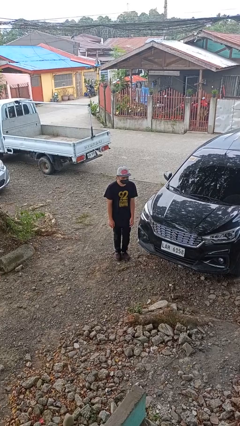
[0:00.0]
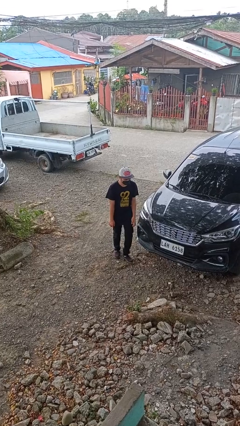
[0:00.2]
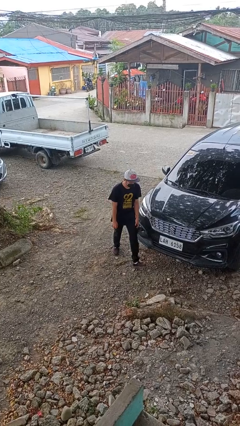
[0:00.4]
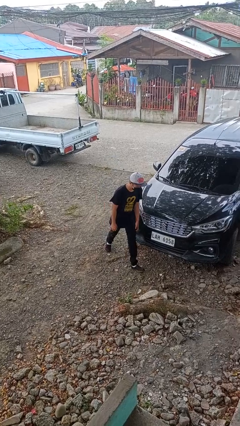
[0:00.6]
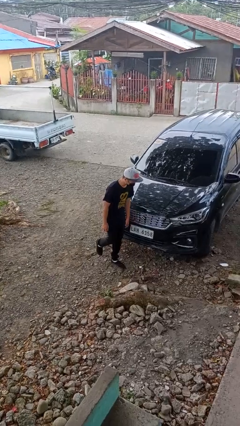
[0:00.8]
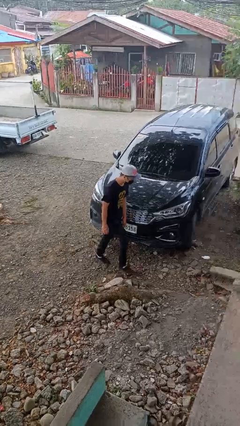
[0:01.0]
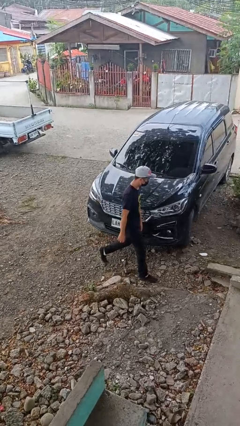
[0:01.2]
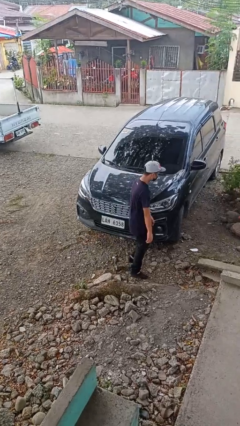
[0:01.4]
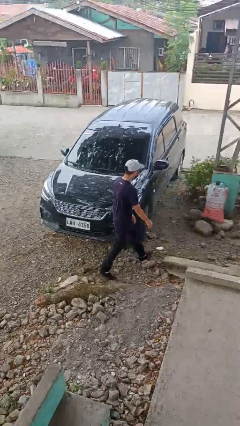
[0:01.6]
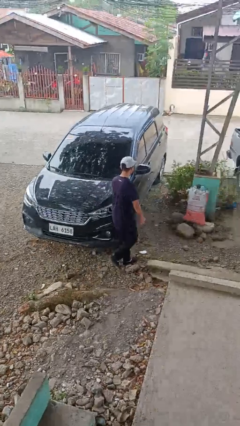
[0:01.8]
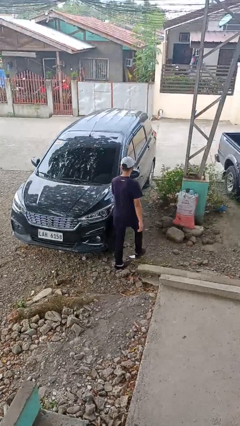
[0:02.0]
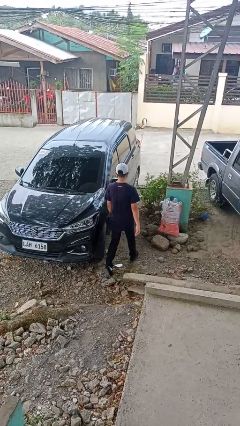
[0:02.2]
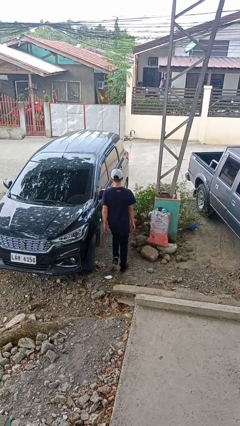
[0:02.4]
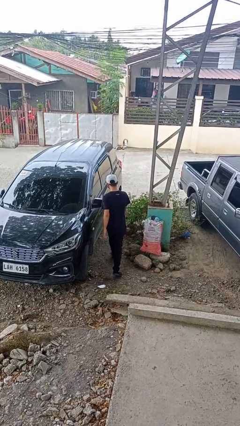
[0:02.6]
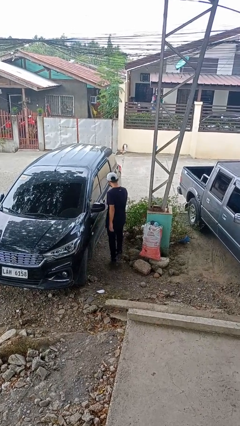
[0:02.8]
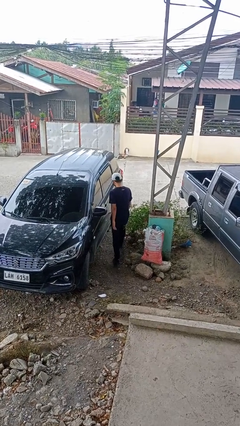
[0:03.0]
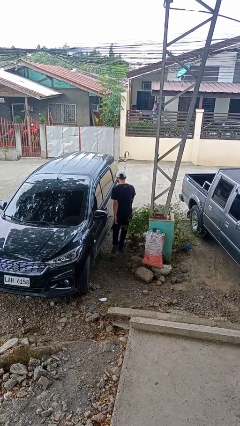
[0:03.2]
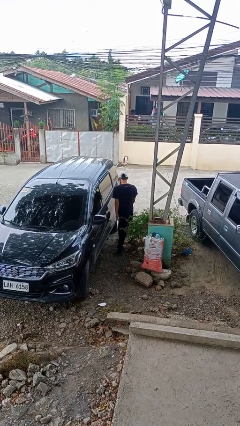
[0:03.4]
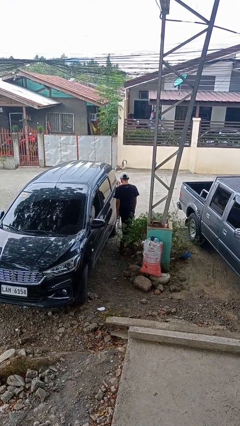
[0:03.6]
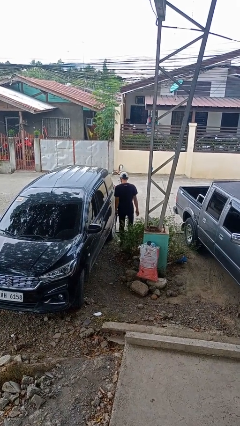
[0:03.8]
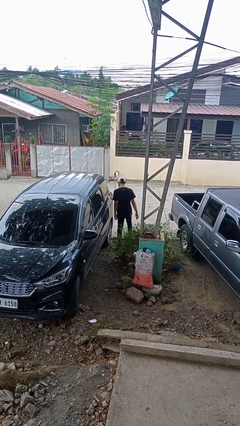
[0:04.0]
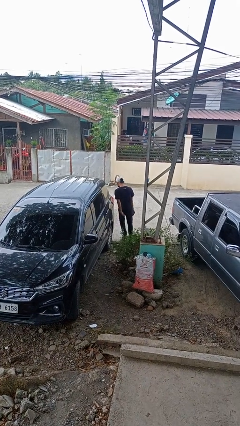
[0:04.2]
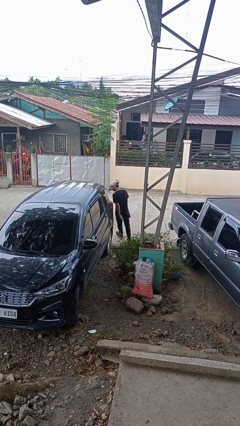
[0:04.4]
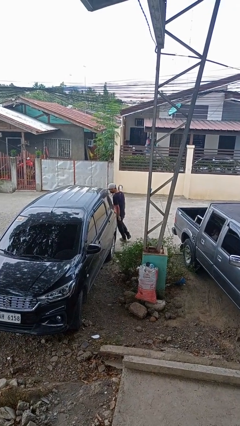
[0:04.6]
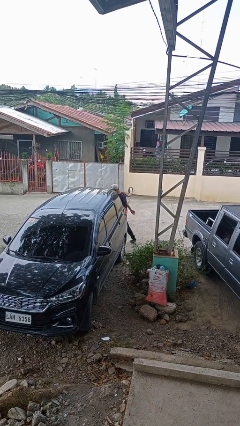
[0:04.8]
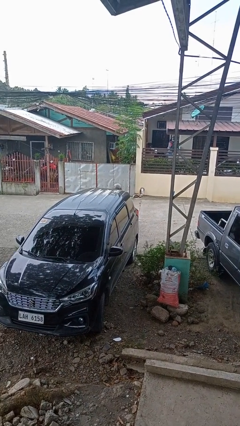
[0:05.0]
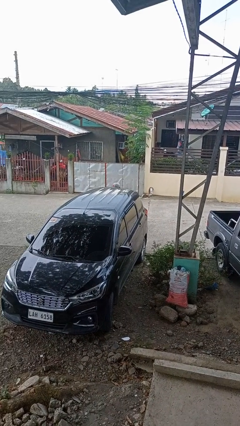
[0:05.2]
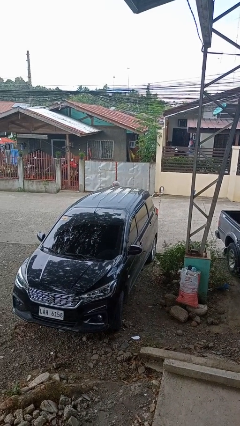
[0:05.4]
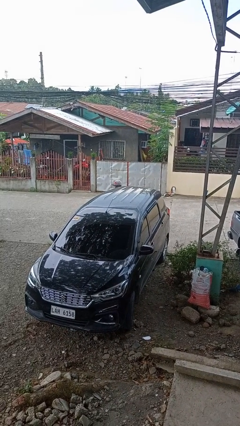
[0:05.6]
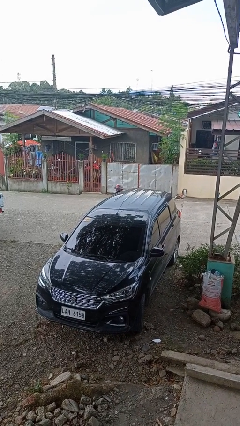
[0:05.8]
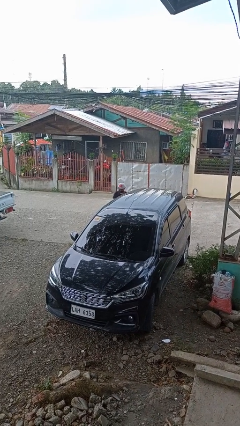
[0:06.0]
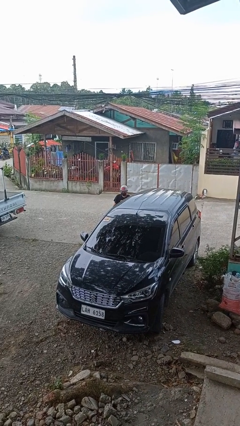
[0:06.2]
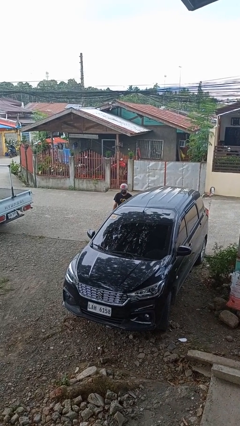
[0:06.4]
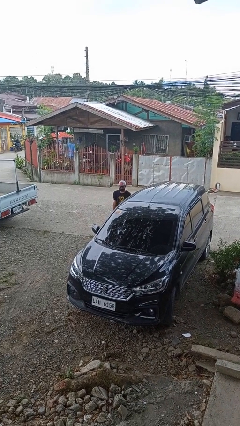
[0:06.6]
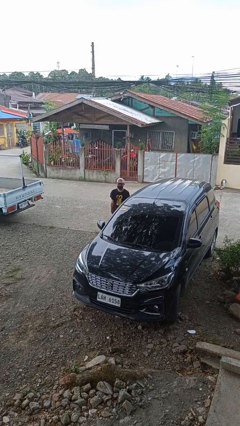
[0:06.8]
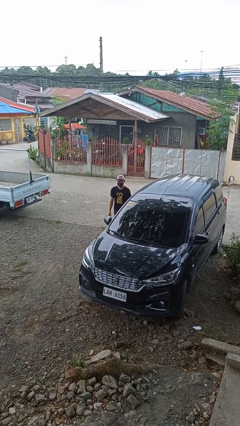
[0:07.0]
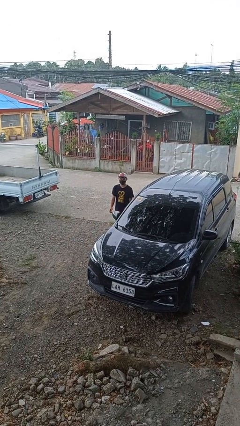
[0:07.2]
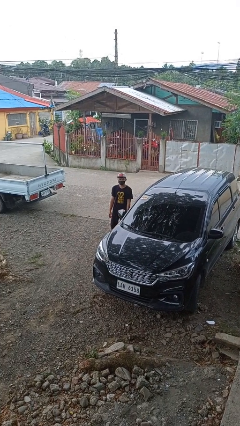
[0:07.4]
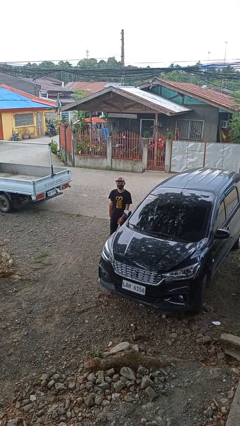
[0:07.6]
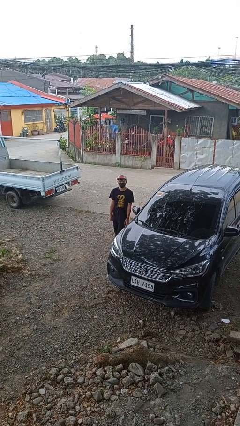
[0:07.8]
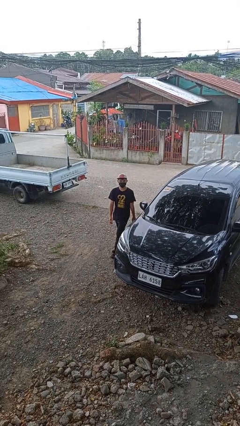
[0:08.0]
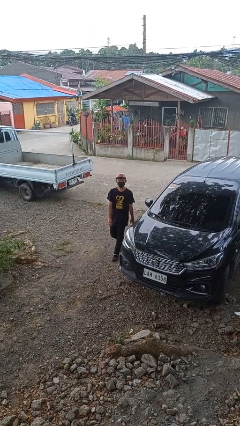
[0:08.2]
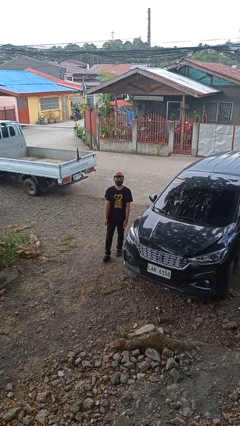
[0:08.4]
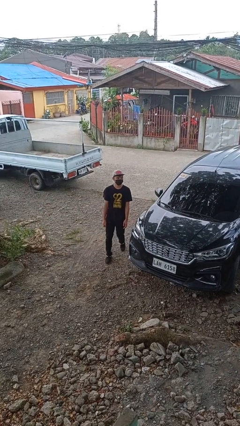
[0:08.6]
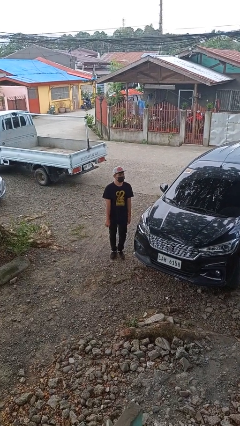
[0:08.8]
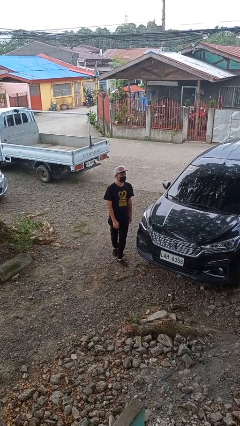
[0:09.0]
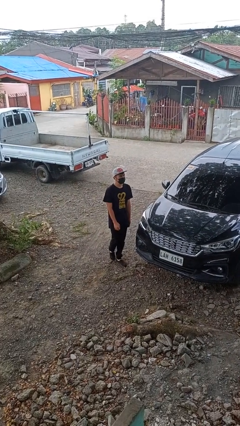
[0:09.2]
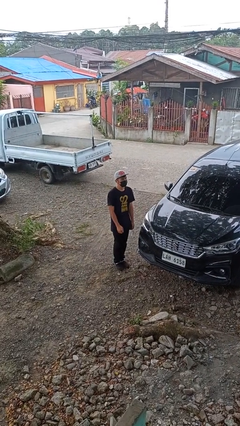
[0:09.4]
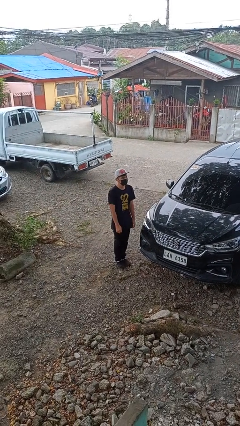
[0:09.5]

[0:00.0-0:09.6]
person walks around car

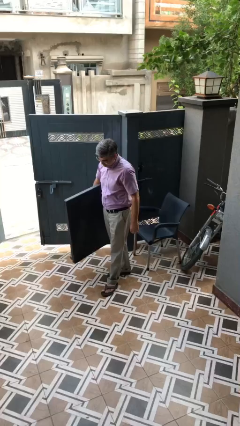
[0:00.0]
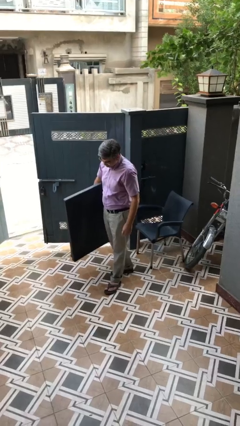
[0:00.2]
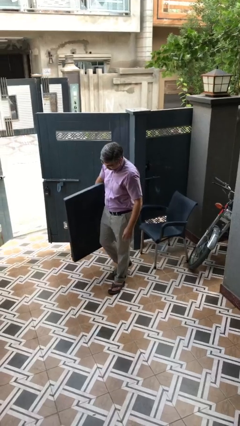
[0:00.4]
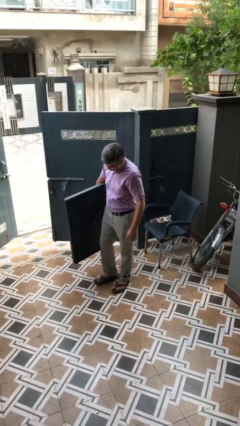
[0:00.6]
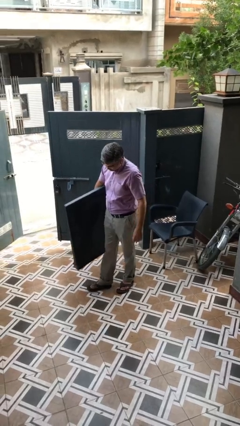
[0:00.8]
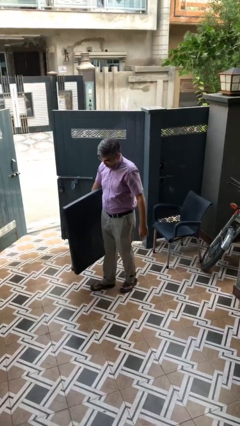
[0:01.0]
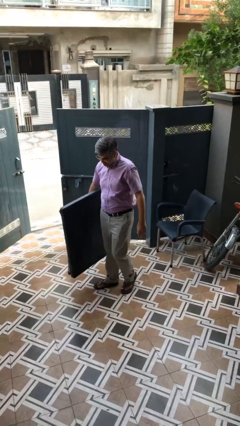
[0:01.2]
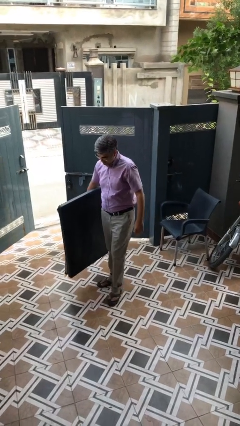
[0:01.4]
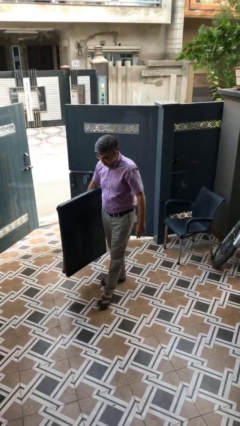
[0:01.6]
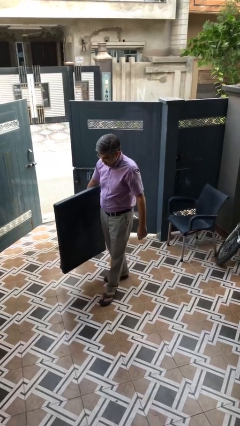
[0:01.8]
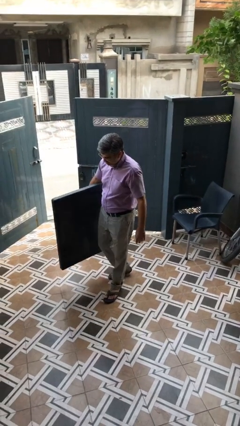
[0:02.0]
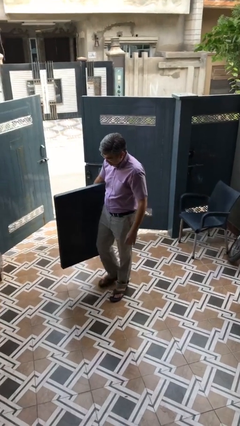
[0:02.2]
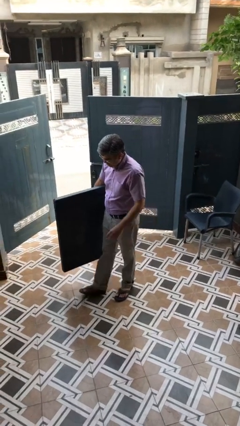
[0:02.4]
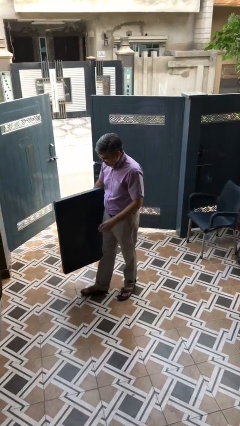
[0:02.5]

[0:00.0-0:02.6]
person carries heavy object

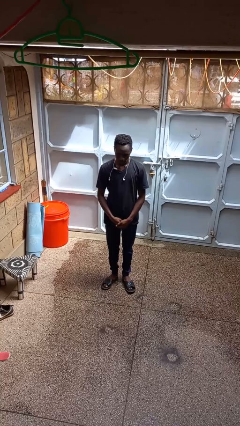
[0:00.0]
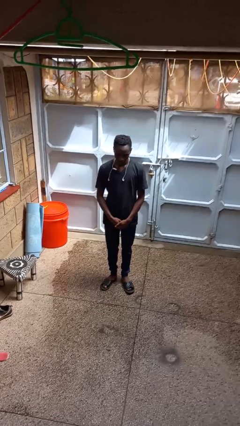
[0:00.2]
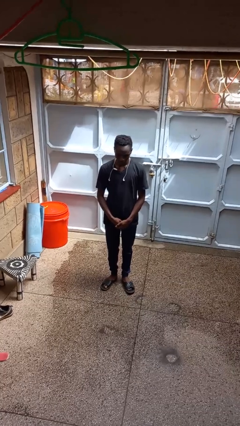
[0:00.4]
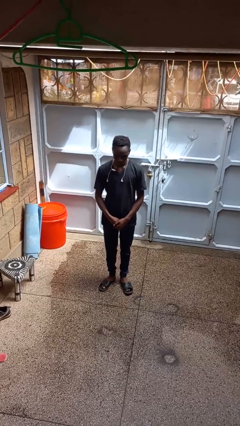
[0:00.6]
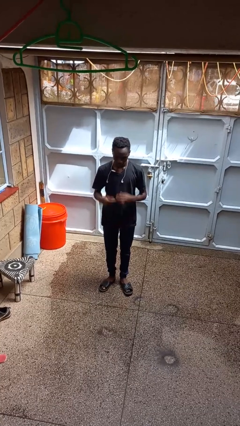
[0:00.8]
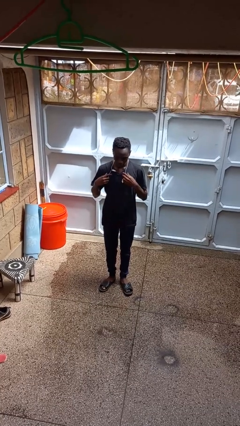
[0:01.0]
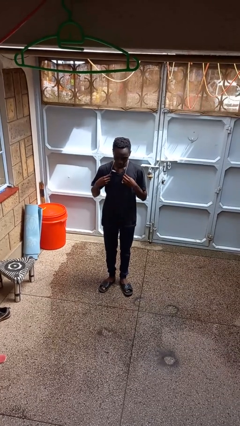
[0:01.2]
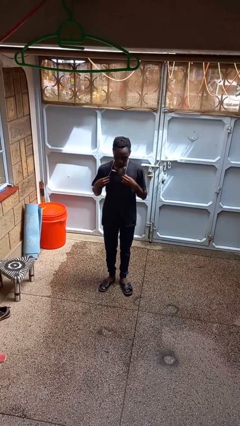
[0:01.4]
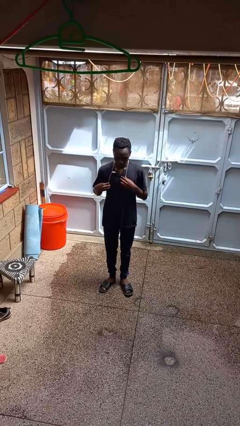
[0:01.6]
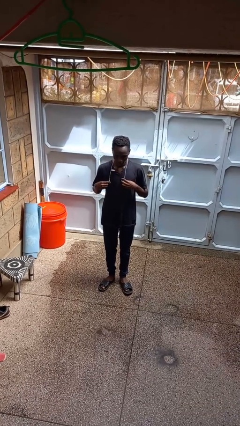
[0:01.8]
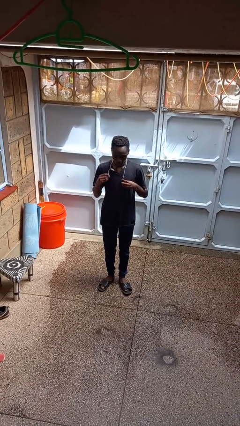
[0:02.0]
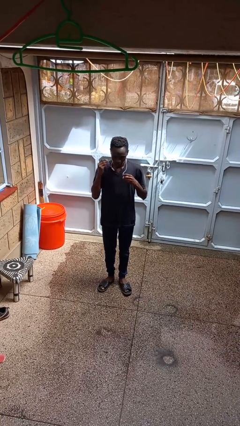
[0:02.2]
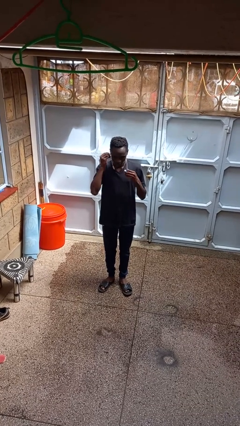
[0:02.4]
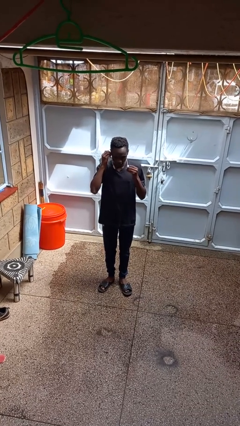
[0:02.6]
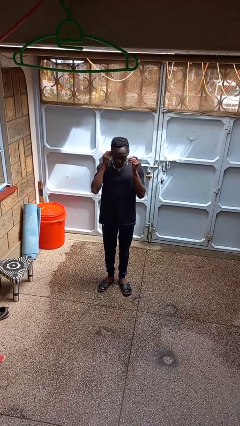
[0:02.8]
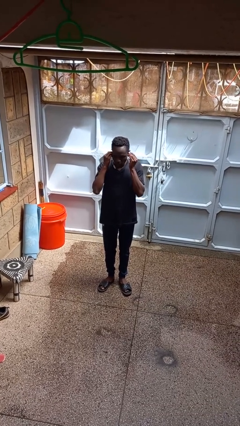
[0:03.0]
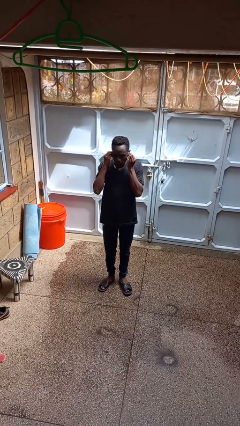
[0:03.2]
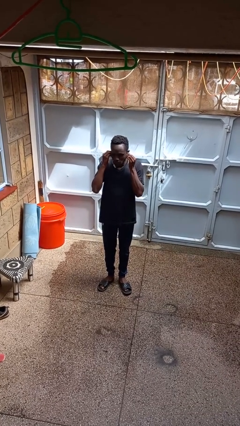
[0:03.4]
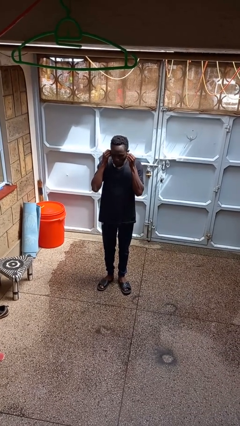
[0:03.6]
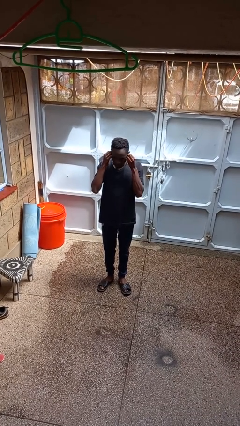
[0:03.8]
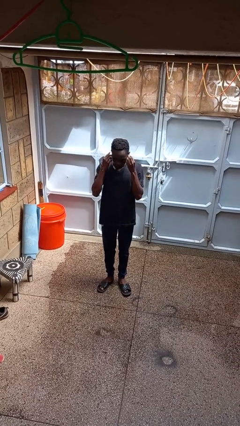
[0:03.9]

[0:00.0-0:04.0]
person puts on headphones

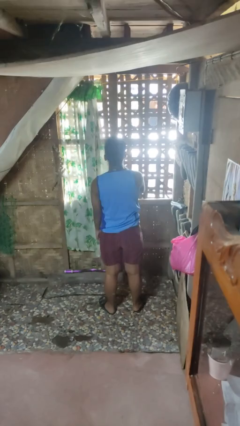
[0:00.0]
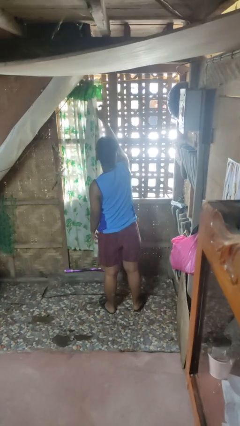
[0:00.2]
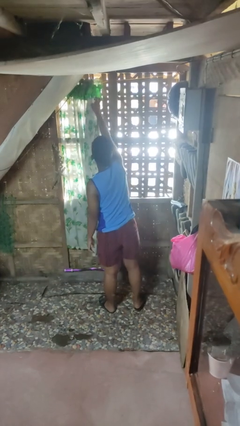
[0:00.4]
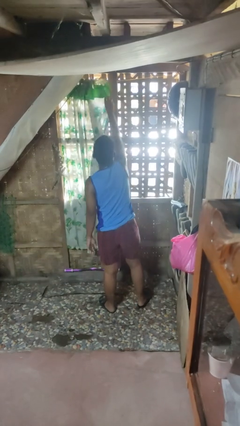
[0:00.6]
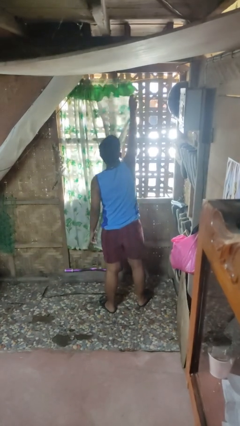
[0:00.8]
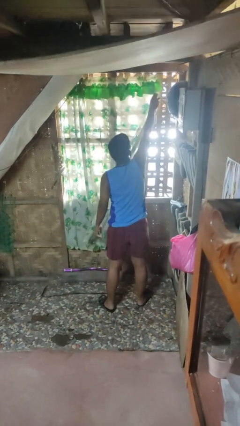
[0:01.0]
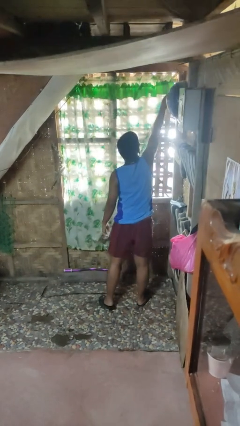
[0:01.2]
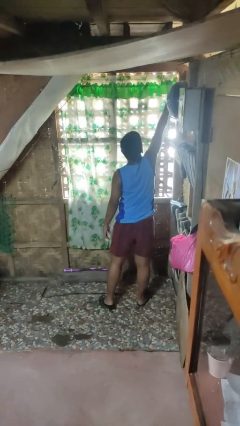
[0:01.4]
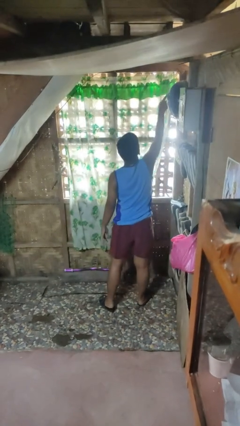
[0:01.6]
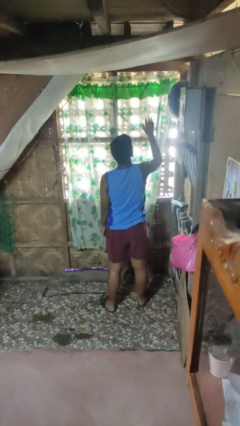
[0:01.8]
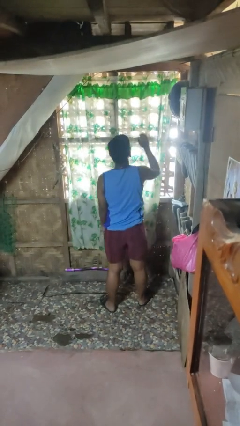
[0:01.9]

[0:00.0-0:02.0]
person closes curtains
